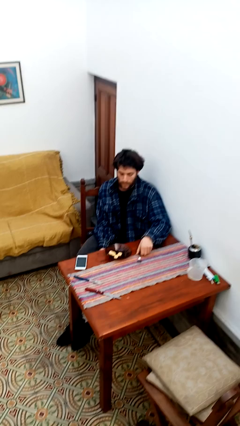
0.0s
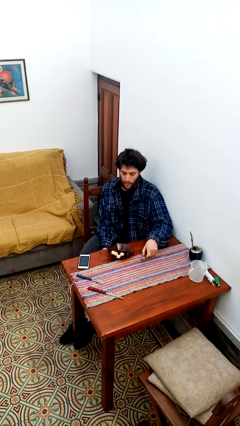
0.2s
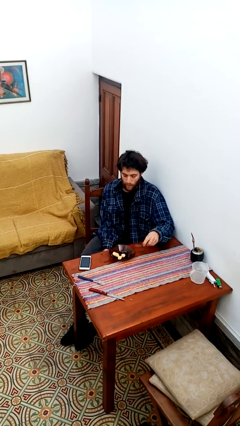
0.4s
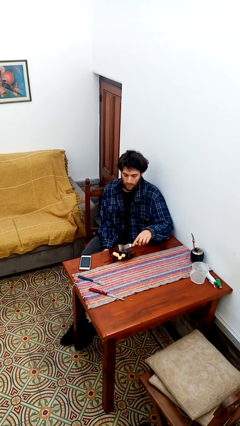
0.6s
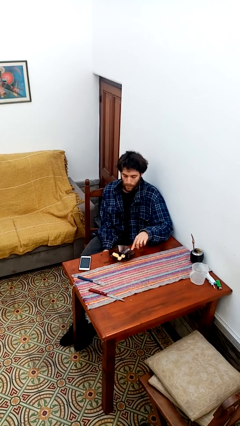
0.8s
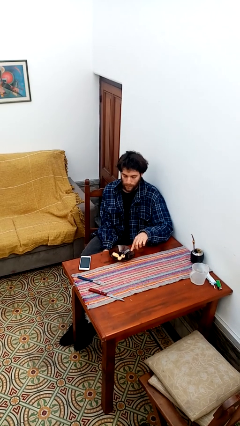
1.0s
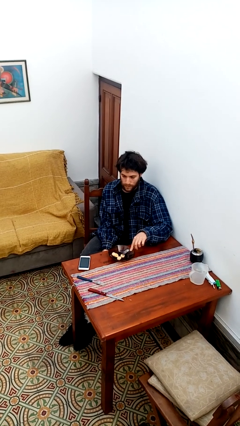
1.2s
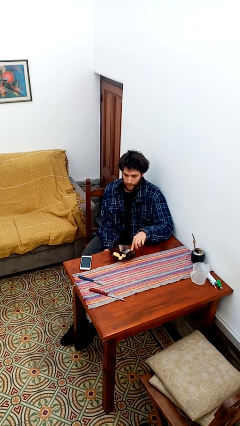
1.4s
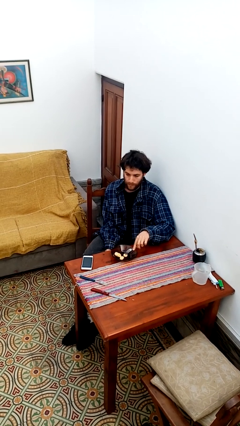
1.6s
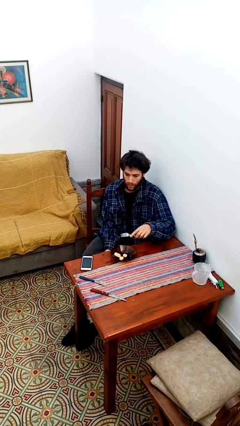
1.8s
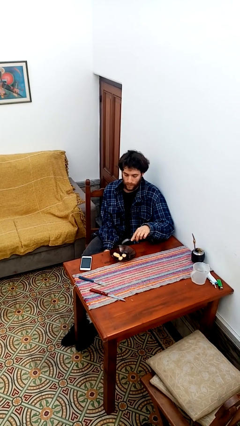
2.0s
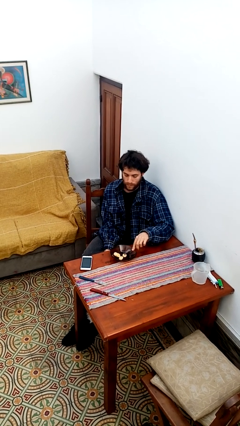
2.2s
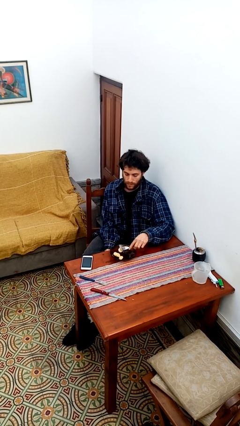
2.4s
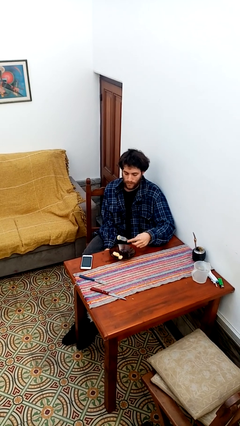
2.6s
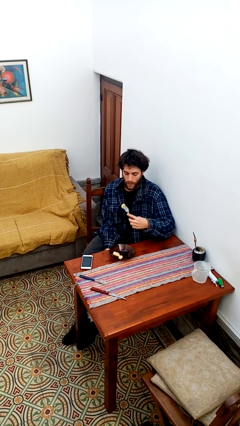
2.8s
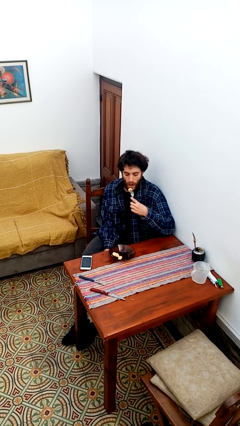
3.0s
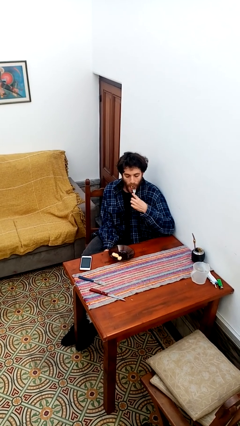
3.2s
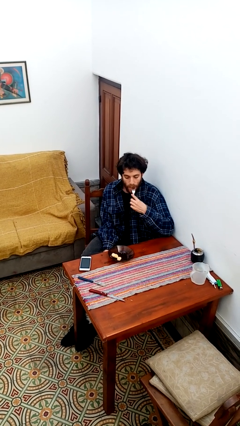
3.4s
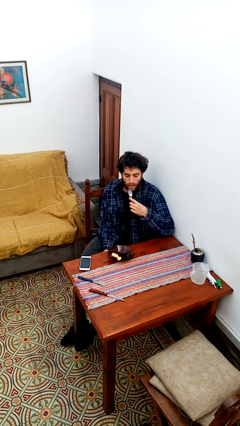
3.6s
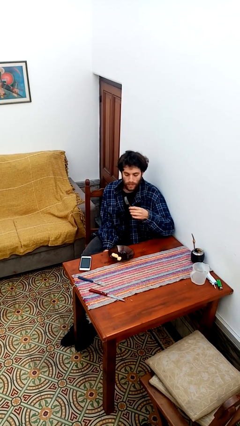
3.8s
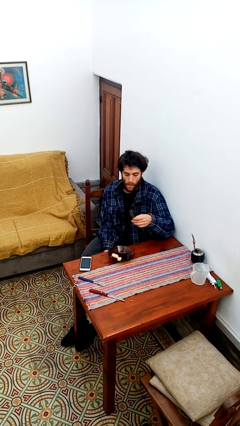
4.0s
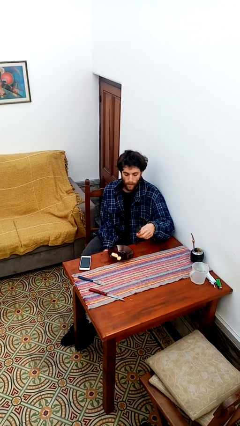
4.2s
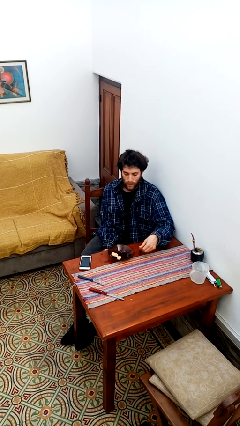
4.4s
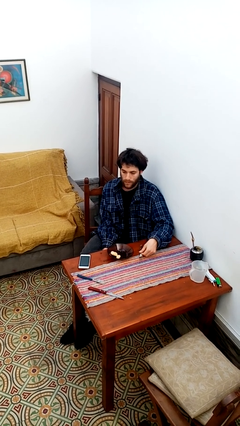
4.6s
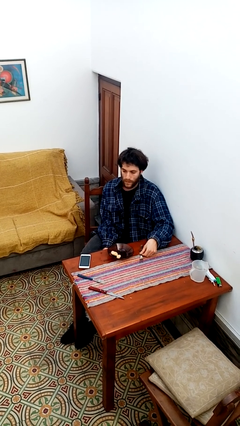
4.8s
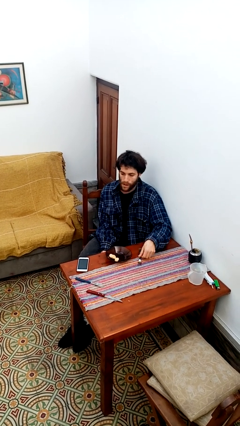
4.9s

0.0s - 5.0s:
person eats with utensil

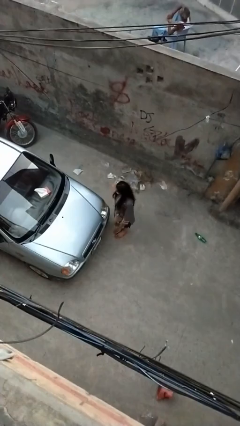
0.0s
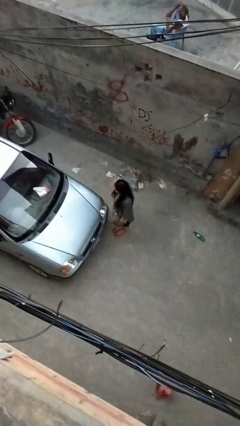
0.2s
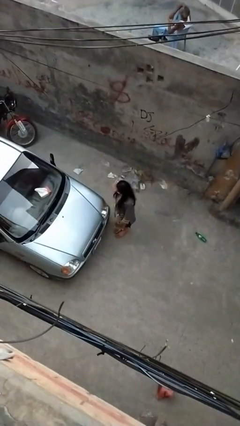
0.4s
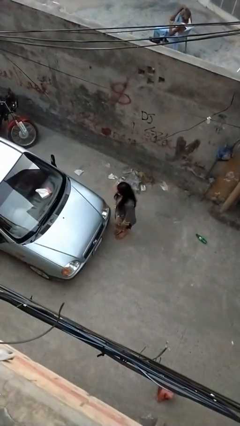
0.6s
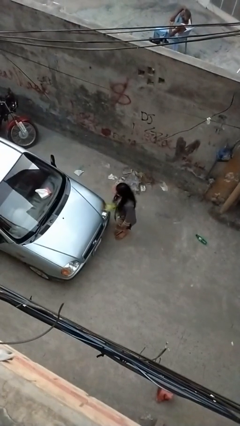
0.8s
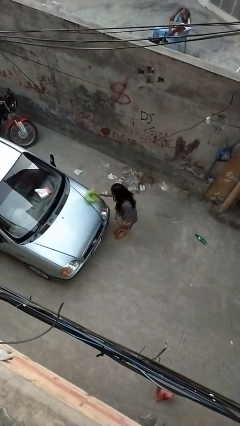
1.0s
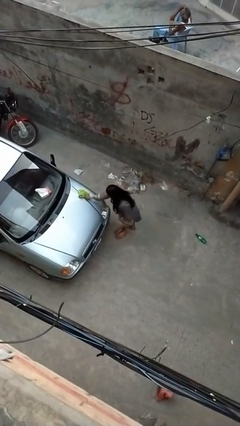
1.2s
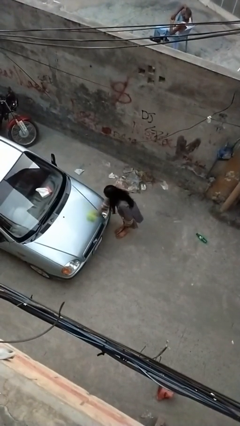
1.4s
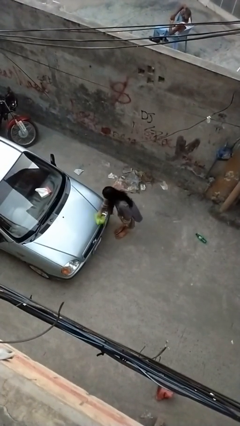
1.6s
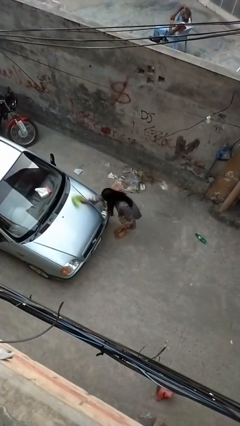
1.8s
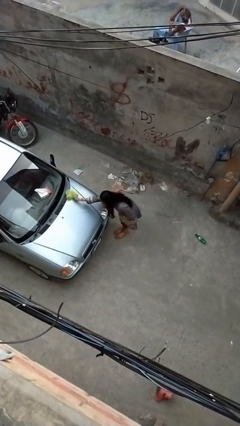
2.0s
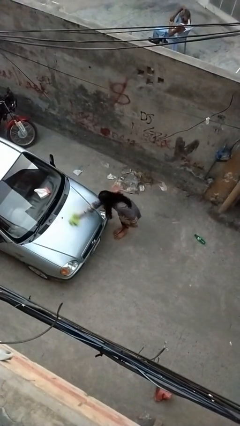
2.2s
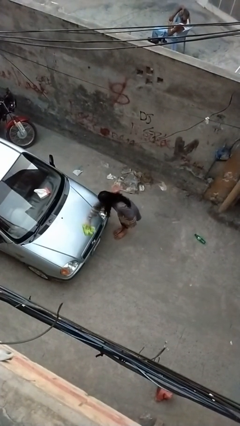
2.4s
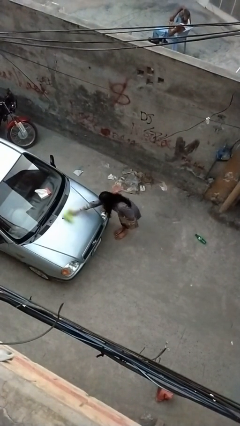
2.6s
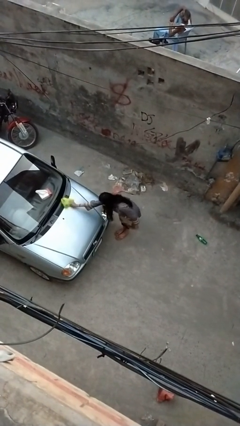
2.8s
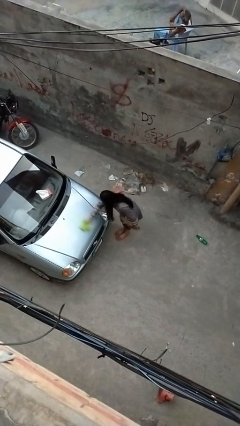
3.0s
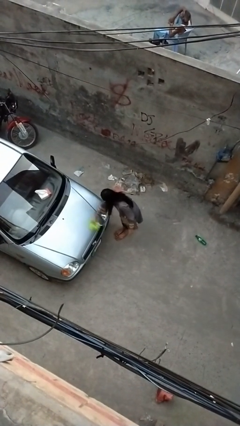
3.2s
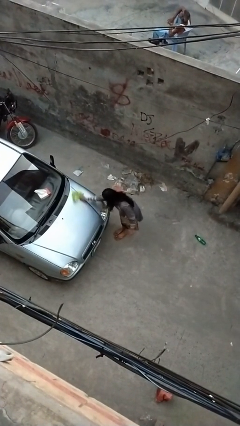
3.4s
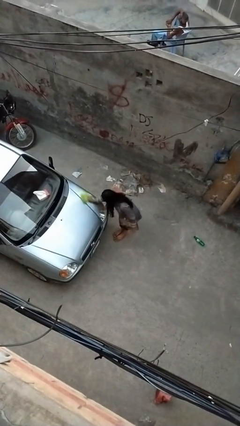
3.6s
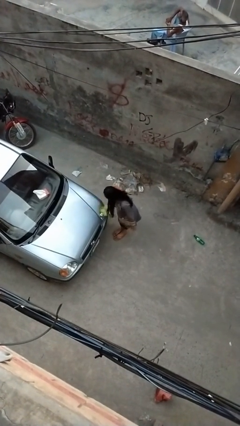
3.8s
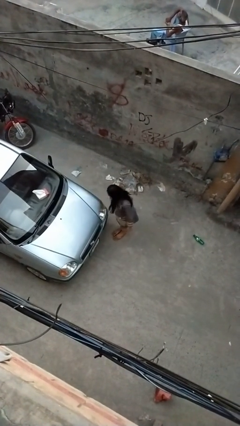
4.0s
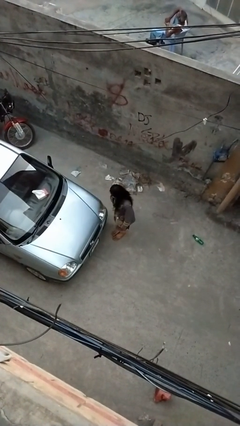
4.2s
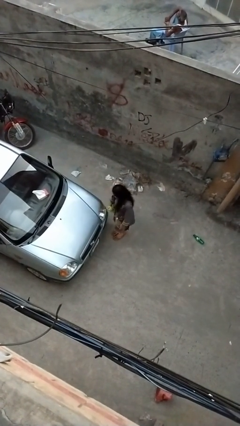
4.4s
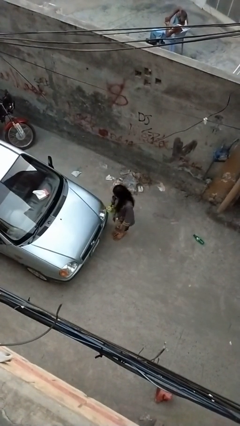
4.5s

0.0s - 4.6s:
person polishes car with rag

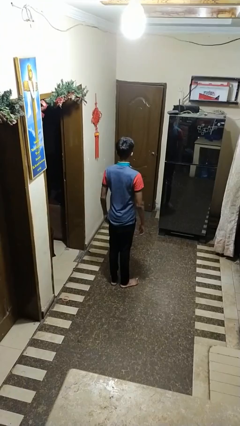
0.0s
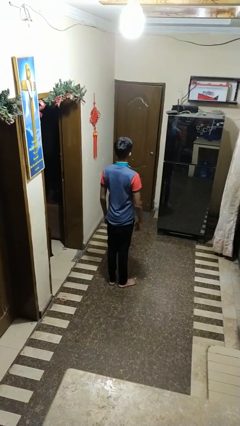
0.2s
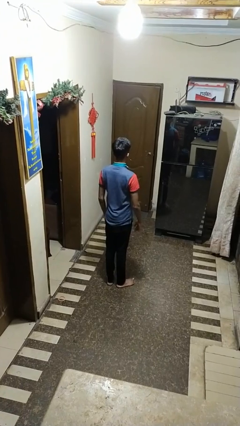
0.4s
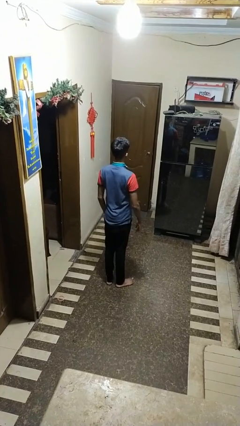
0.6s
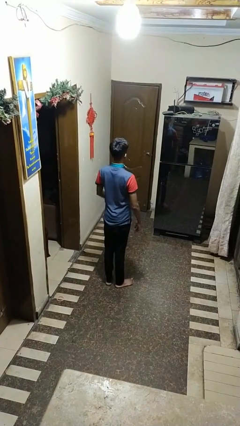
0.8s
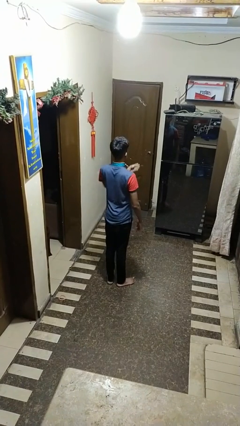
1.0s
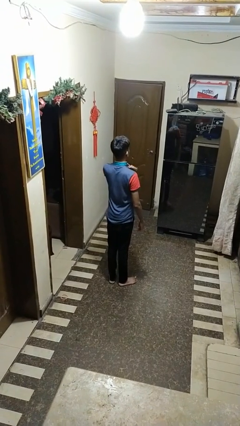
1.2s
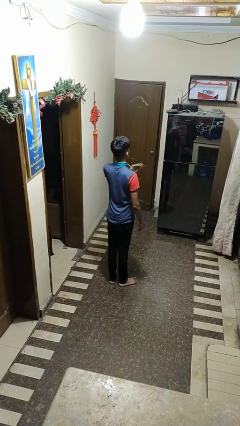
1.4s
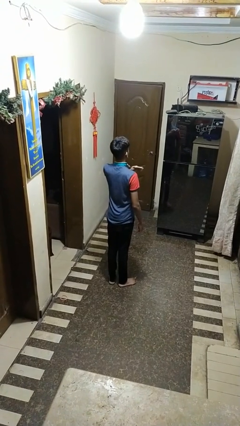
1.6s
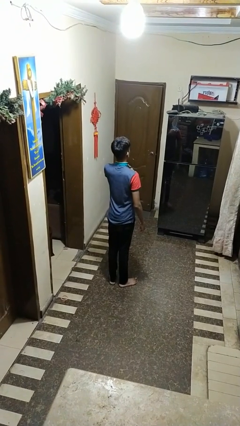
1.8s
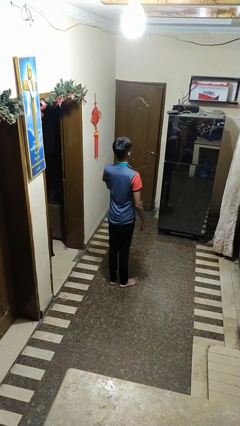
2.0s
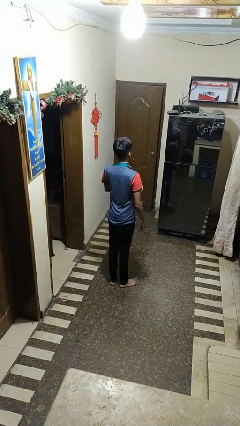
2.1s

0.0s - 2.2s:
person drums on chest

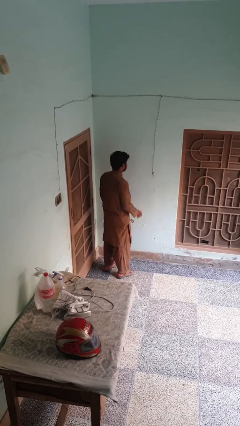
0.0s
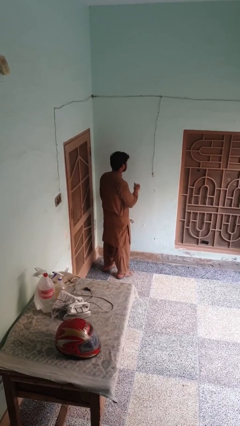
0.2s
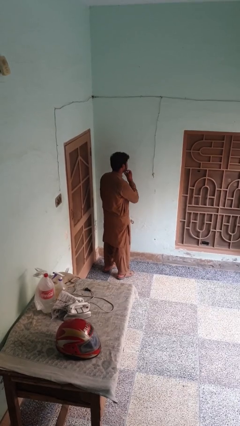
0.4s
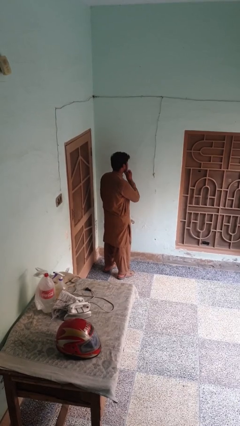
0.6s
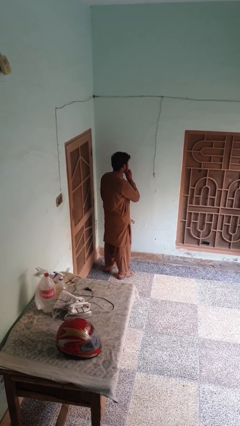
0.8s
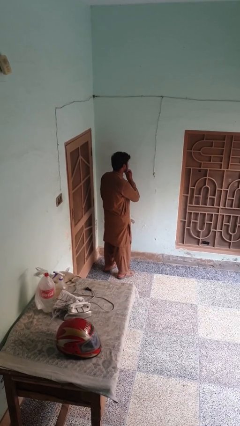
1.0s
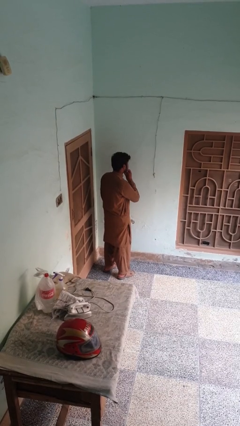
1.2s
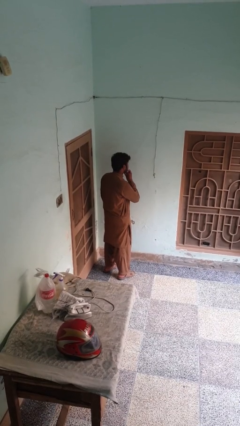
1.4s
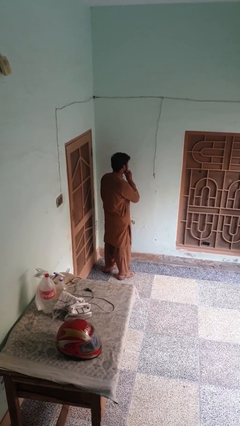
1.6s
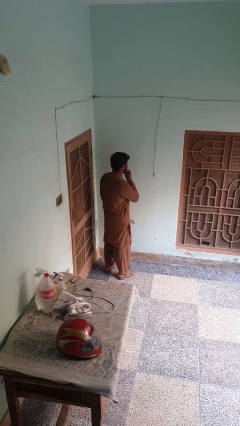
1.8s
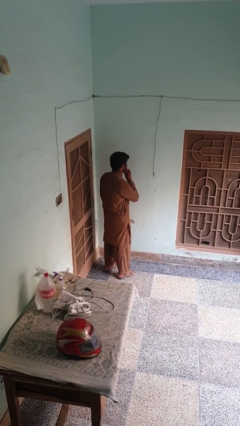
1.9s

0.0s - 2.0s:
person strokes chin

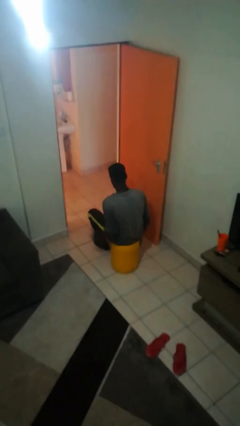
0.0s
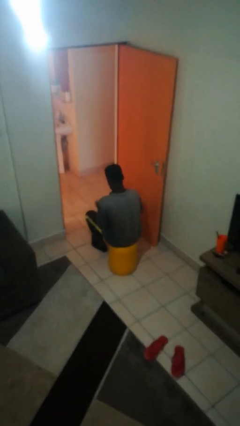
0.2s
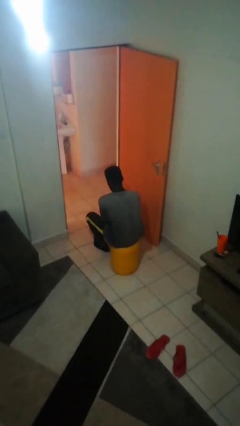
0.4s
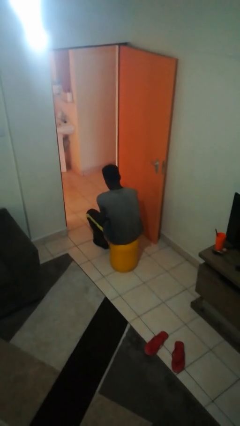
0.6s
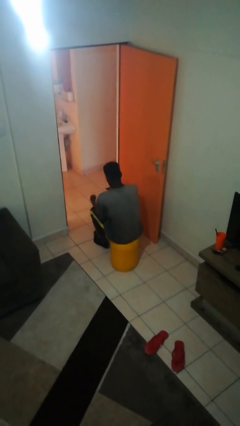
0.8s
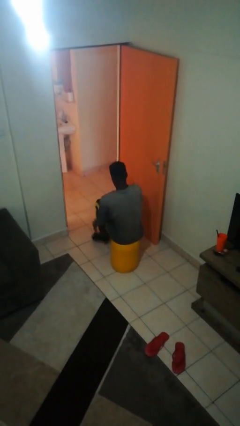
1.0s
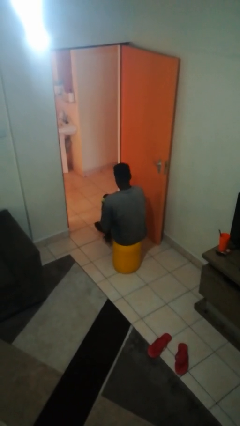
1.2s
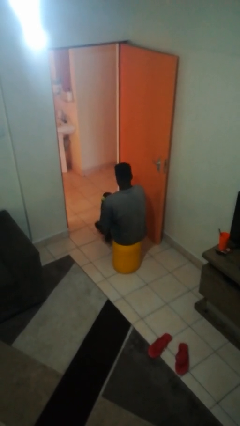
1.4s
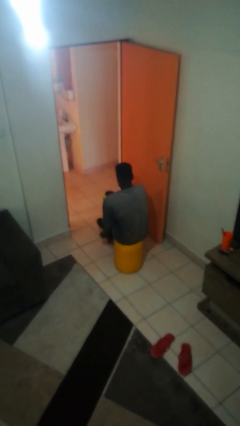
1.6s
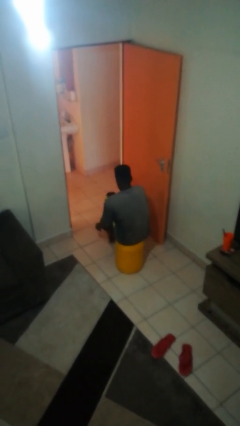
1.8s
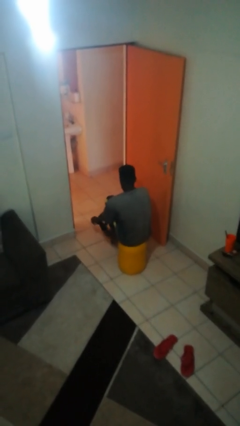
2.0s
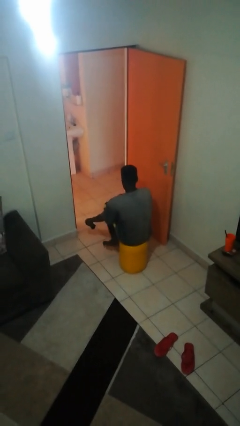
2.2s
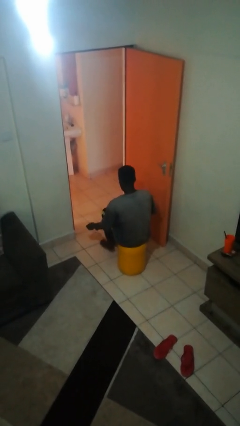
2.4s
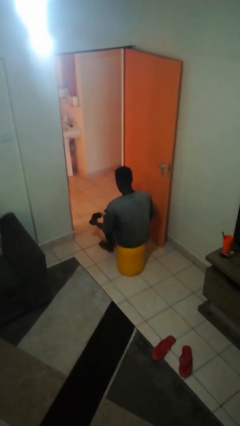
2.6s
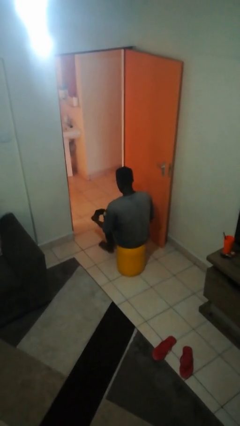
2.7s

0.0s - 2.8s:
person takes off socks

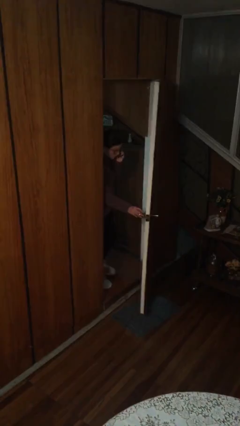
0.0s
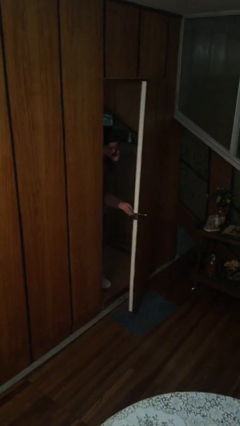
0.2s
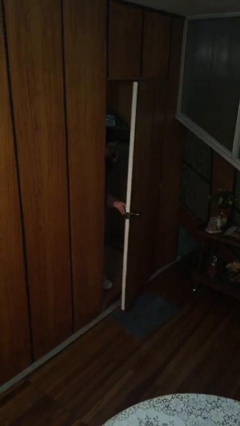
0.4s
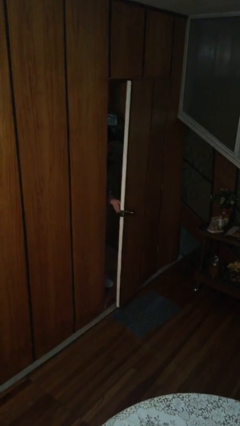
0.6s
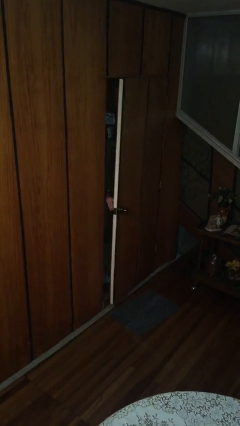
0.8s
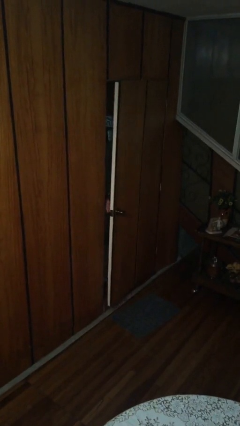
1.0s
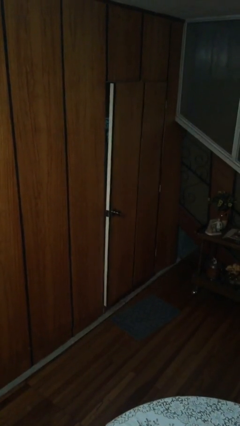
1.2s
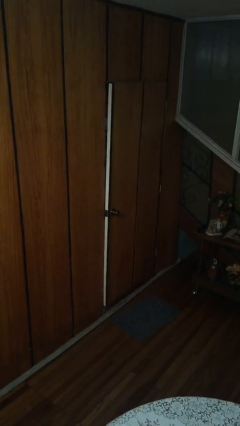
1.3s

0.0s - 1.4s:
person closes facility door
